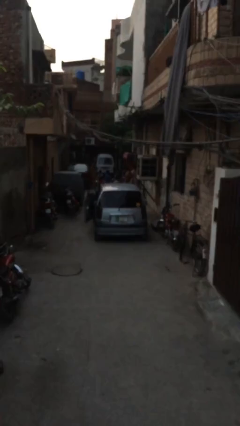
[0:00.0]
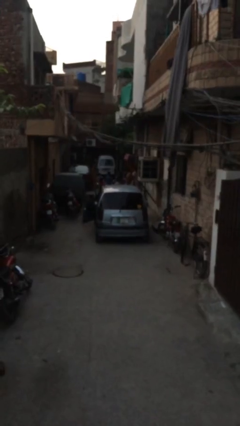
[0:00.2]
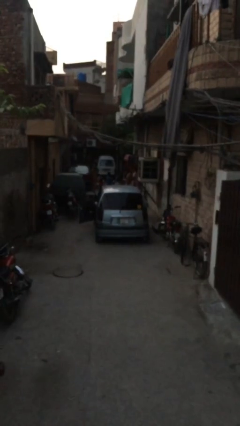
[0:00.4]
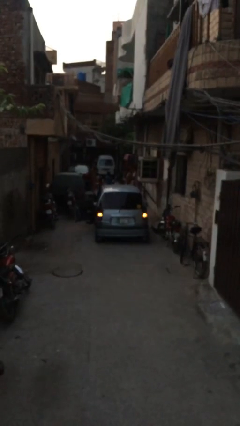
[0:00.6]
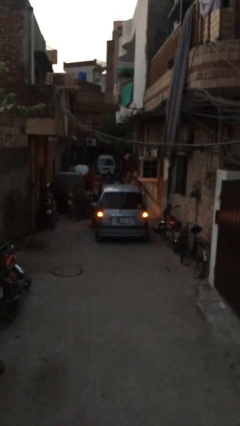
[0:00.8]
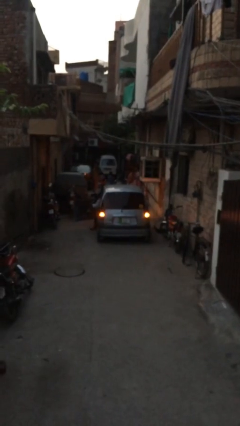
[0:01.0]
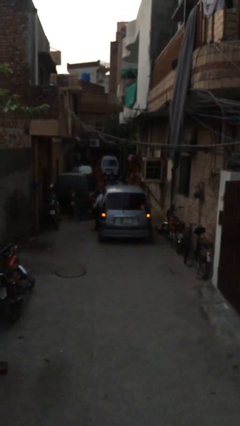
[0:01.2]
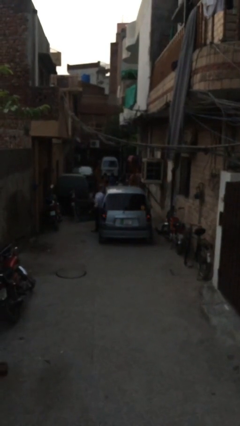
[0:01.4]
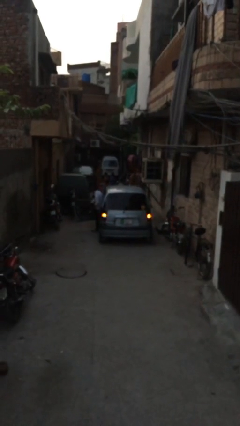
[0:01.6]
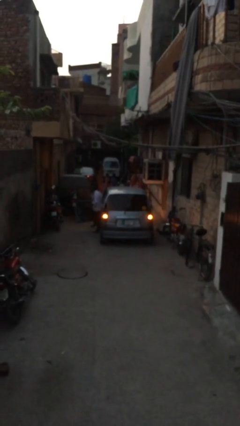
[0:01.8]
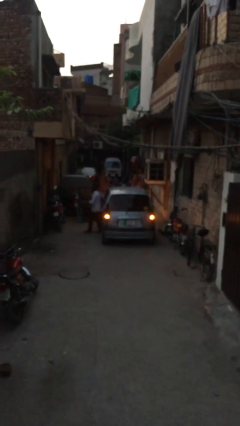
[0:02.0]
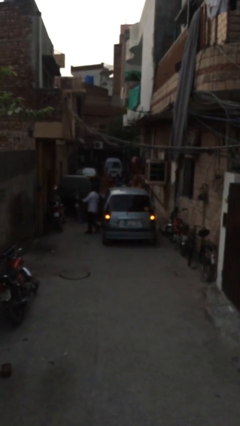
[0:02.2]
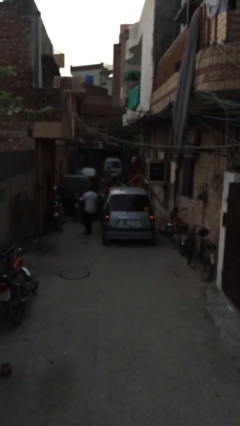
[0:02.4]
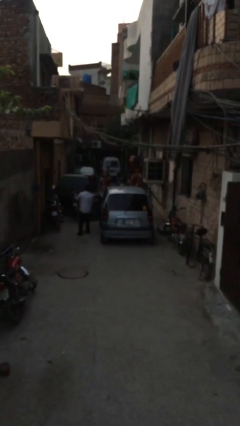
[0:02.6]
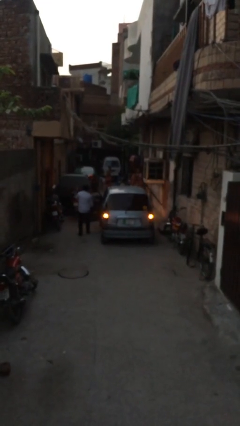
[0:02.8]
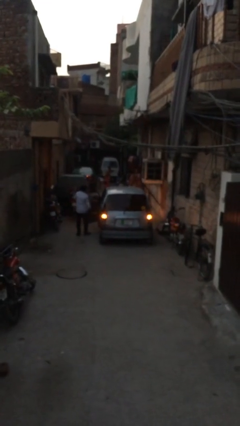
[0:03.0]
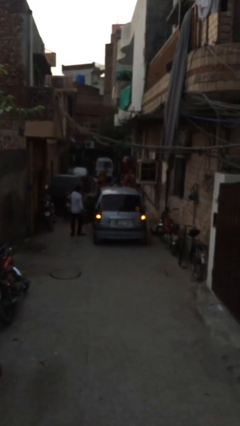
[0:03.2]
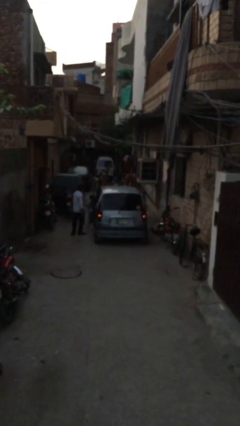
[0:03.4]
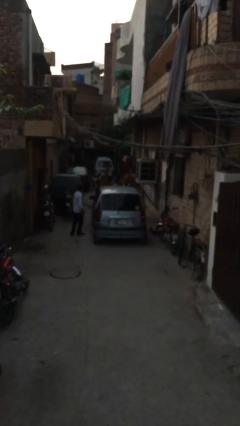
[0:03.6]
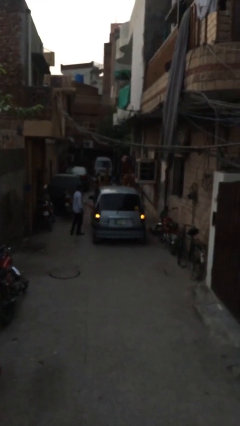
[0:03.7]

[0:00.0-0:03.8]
car drops off person

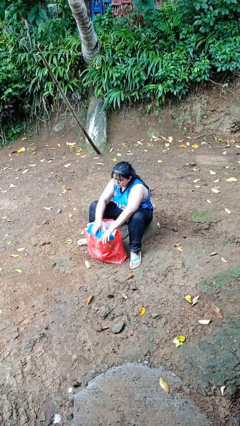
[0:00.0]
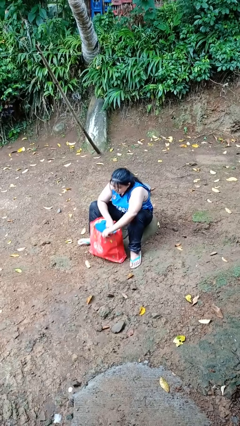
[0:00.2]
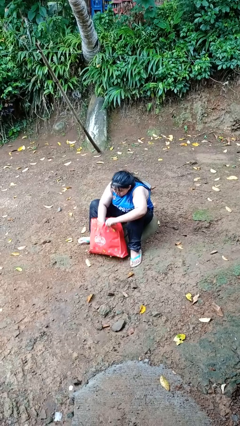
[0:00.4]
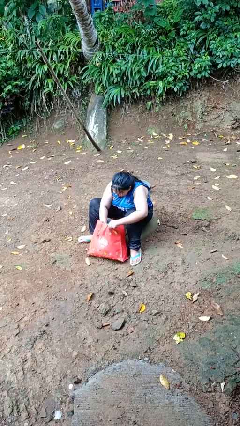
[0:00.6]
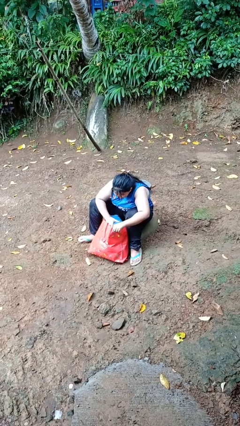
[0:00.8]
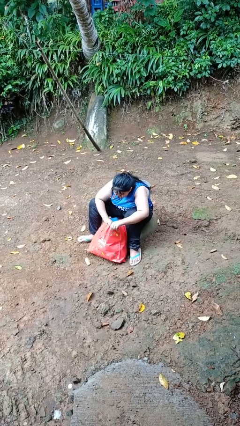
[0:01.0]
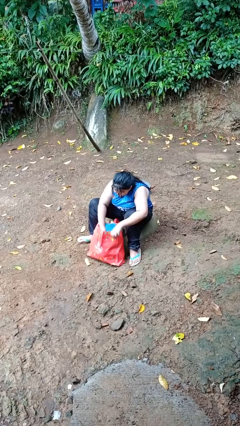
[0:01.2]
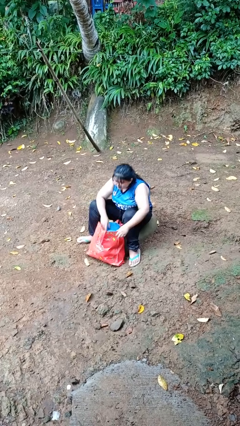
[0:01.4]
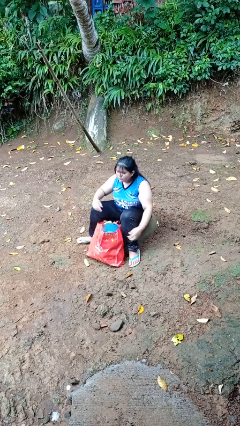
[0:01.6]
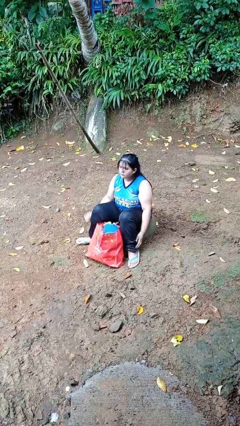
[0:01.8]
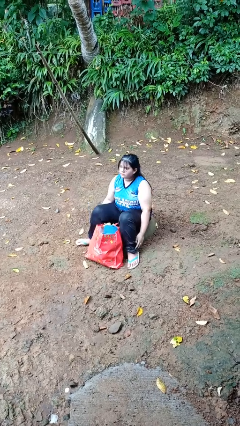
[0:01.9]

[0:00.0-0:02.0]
person searches in bag

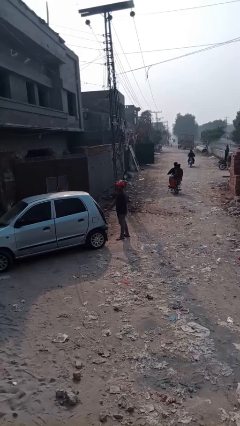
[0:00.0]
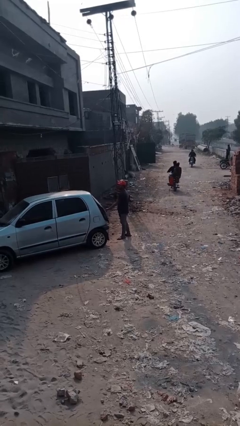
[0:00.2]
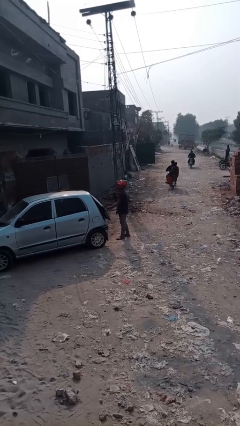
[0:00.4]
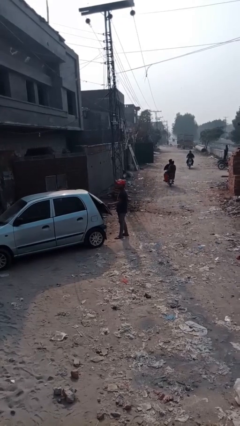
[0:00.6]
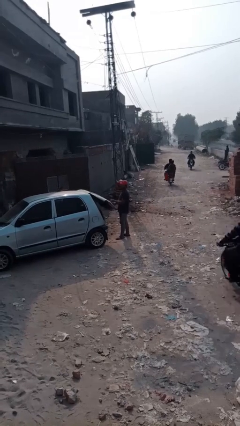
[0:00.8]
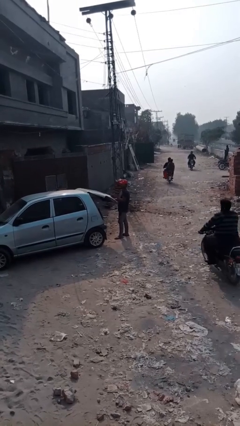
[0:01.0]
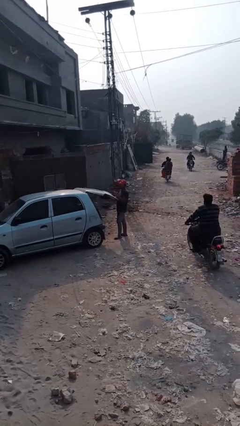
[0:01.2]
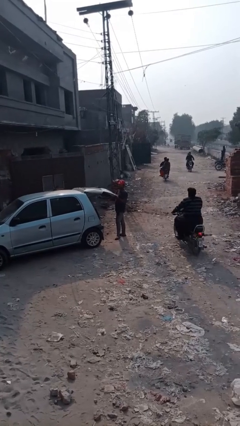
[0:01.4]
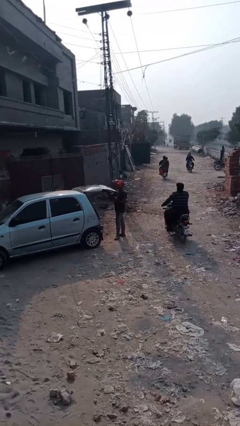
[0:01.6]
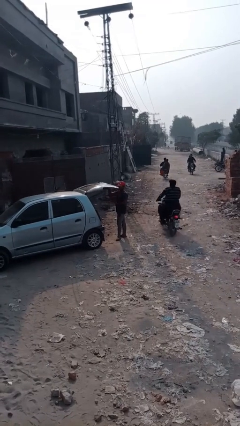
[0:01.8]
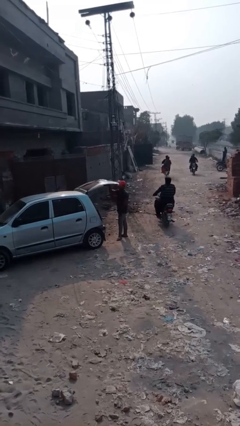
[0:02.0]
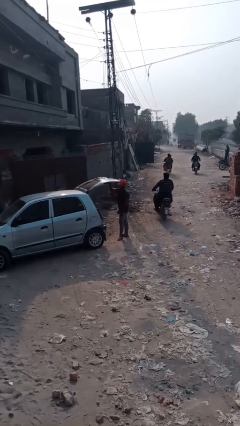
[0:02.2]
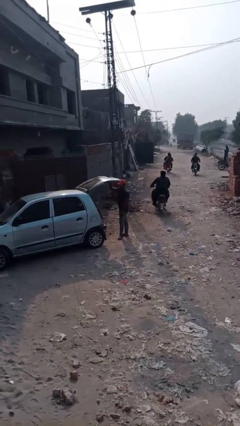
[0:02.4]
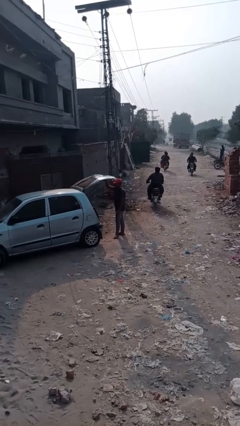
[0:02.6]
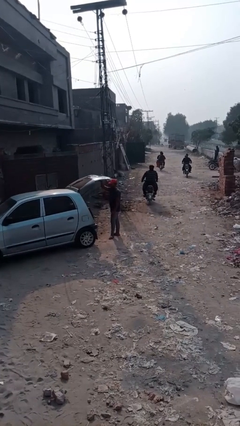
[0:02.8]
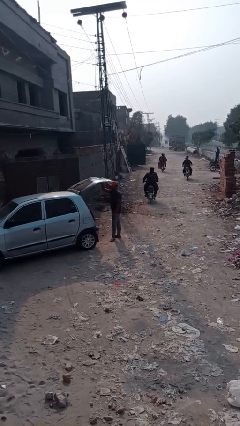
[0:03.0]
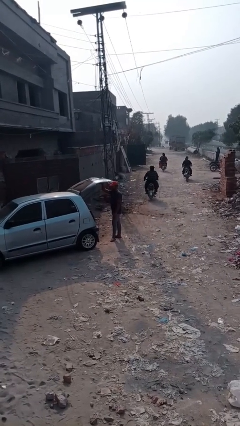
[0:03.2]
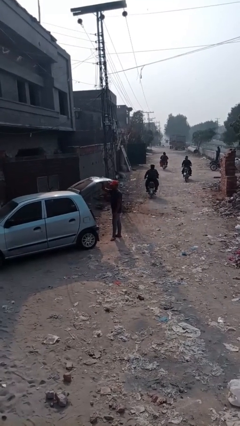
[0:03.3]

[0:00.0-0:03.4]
person opens car trunk

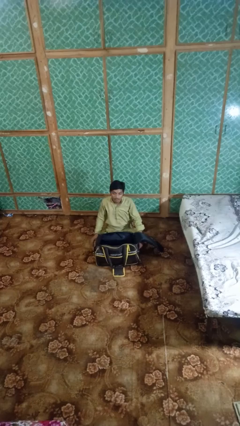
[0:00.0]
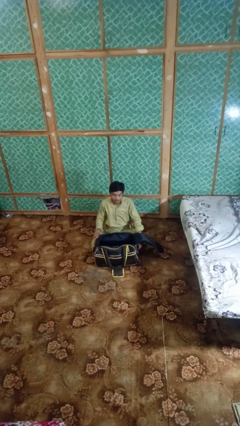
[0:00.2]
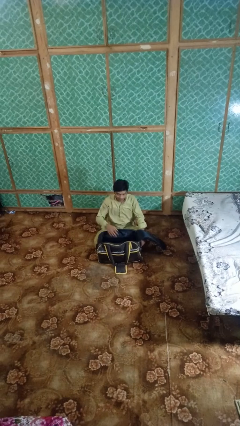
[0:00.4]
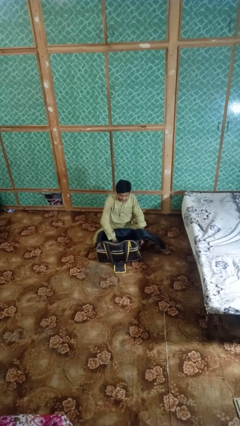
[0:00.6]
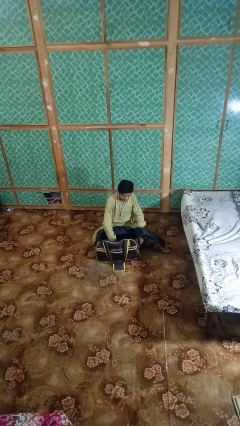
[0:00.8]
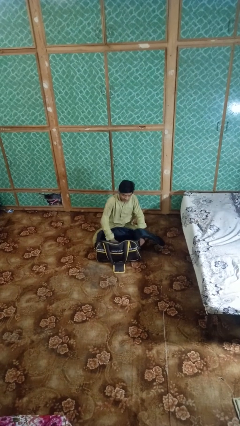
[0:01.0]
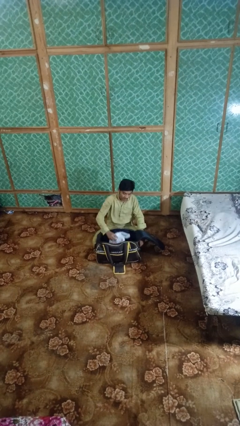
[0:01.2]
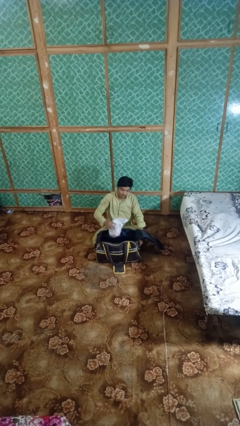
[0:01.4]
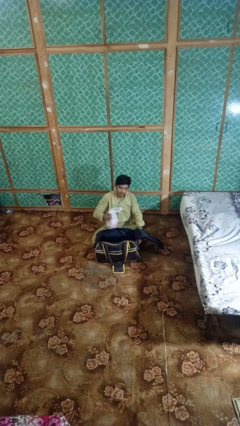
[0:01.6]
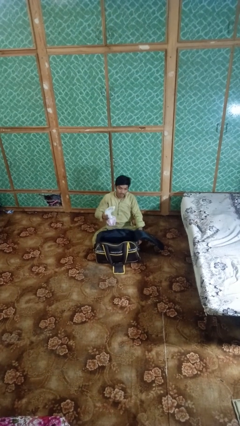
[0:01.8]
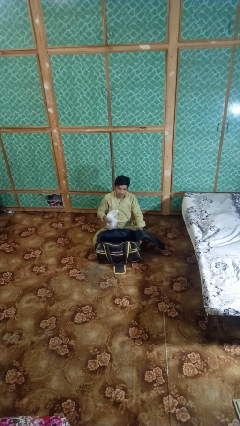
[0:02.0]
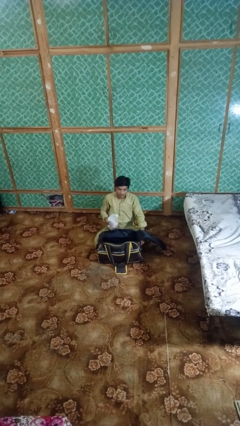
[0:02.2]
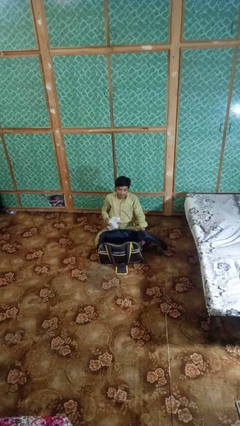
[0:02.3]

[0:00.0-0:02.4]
person takes object from bag

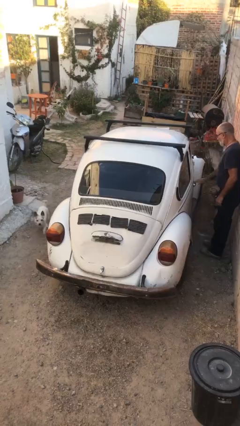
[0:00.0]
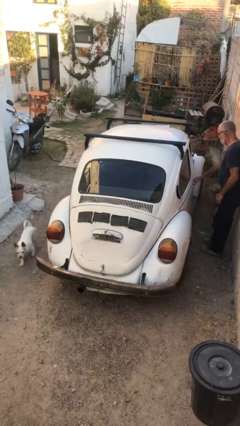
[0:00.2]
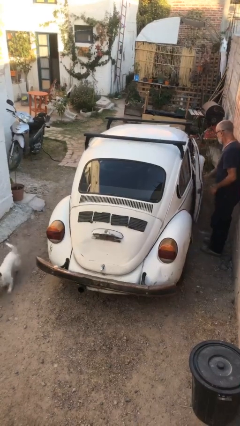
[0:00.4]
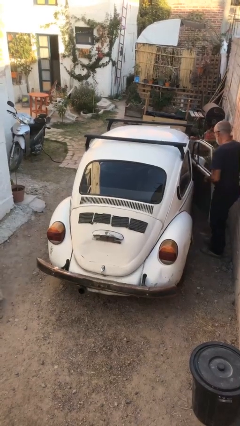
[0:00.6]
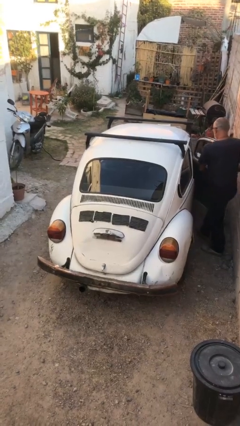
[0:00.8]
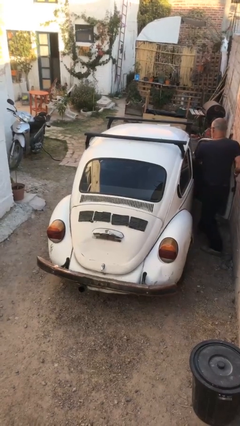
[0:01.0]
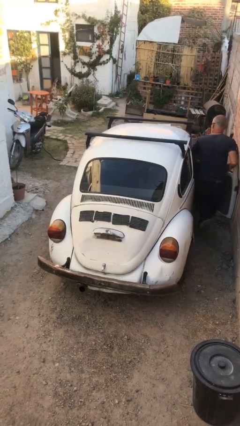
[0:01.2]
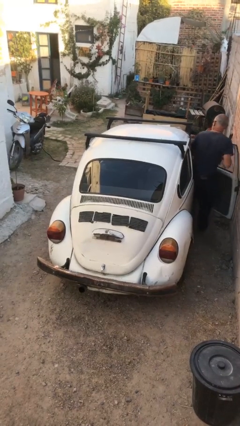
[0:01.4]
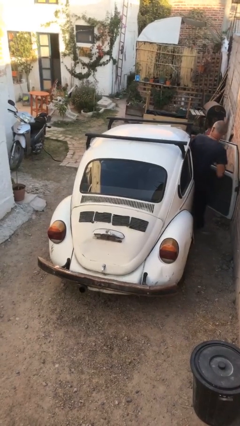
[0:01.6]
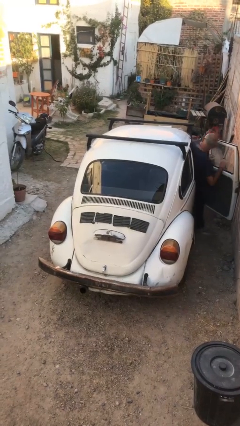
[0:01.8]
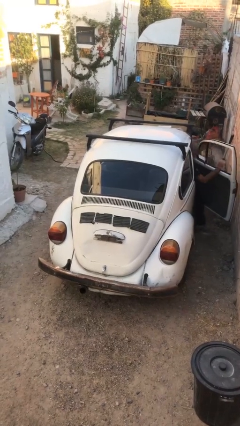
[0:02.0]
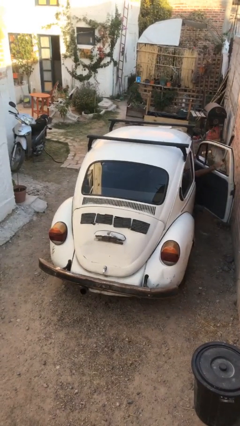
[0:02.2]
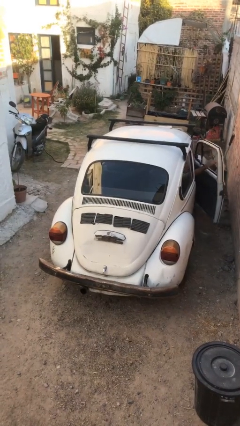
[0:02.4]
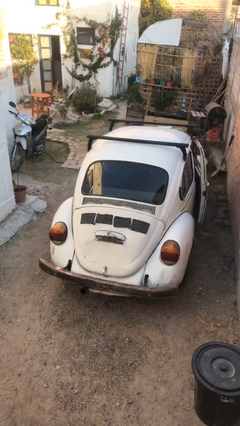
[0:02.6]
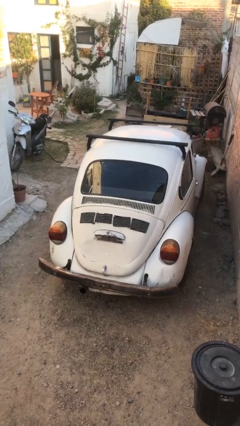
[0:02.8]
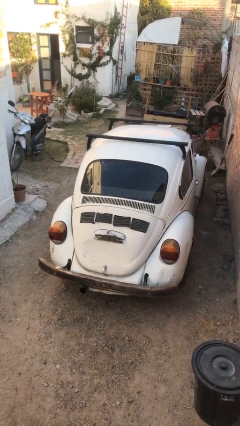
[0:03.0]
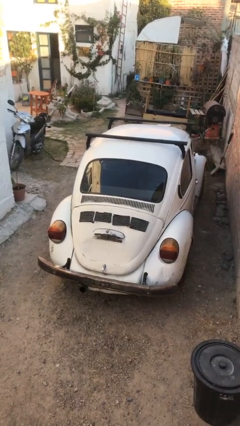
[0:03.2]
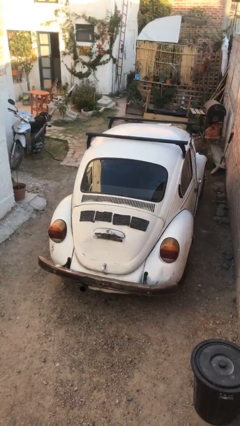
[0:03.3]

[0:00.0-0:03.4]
car picks up person

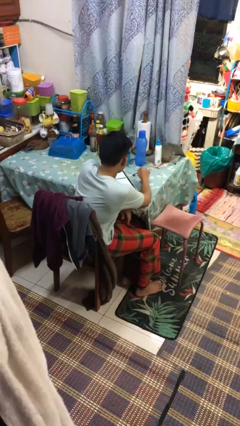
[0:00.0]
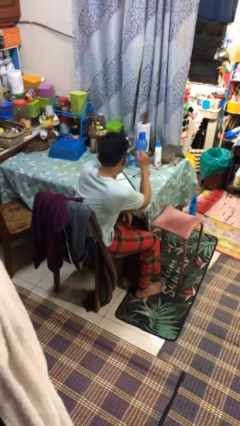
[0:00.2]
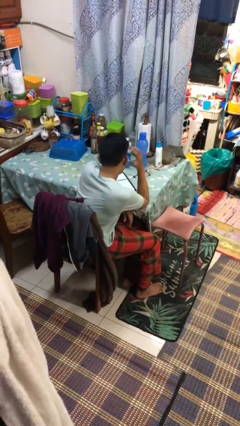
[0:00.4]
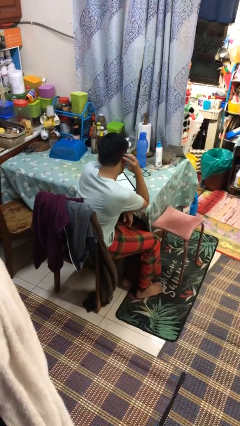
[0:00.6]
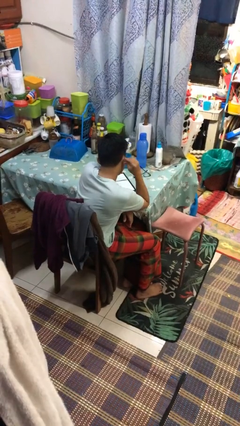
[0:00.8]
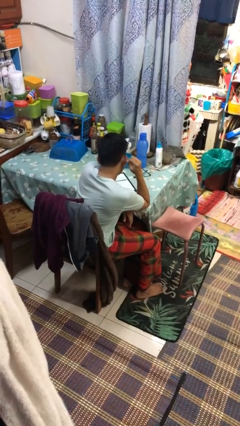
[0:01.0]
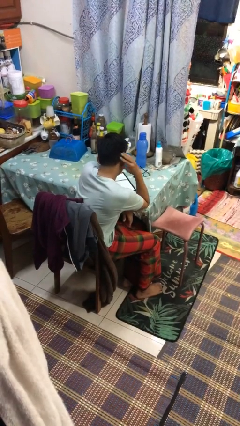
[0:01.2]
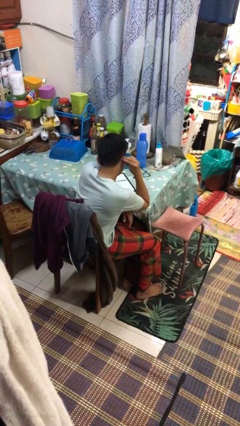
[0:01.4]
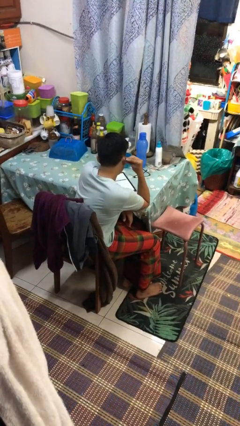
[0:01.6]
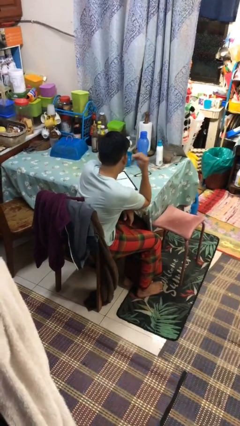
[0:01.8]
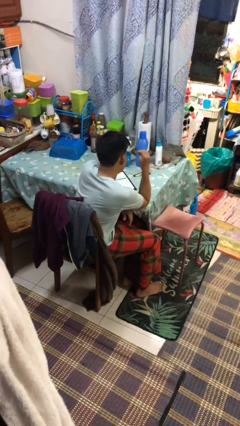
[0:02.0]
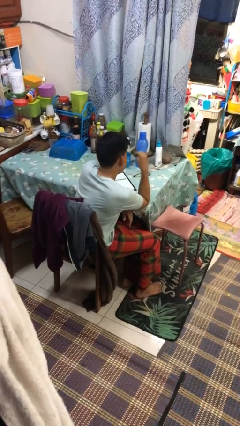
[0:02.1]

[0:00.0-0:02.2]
person touches earlobe

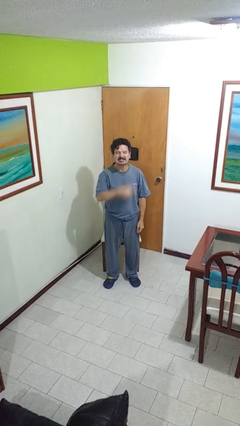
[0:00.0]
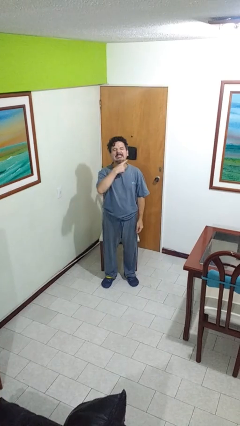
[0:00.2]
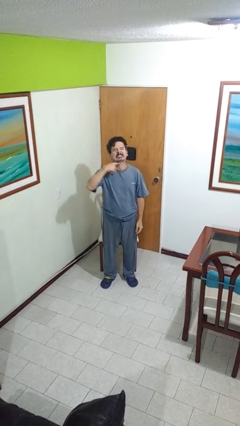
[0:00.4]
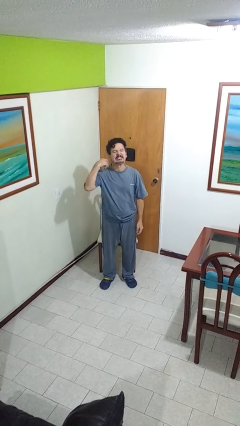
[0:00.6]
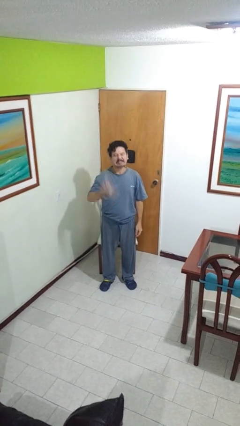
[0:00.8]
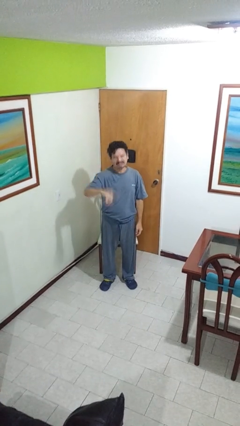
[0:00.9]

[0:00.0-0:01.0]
person gestures cut
